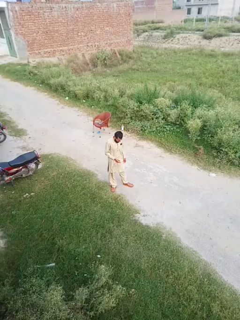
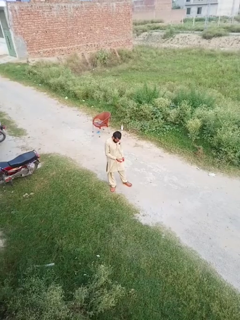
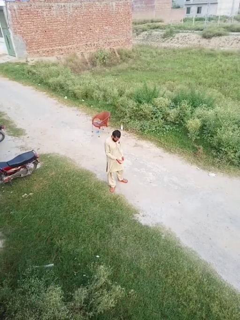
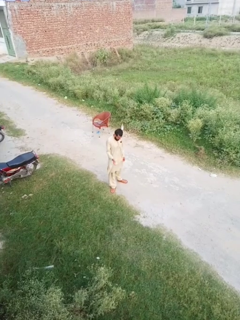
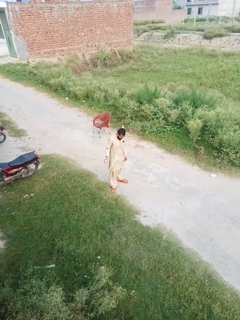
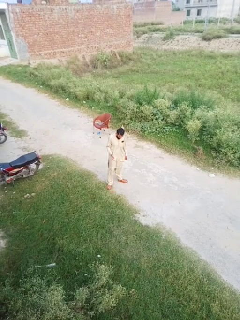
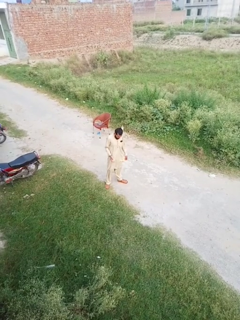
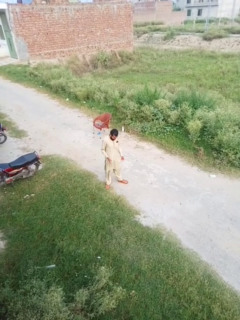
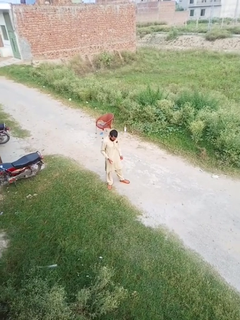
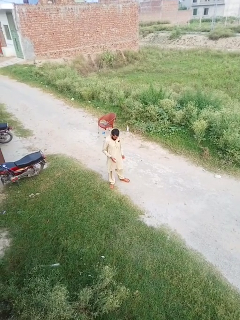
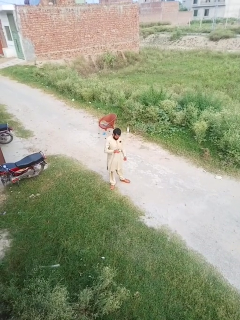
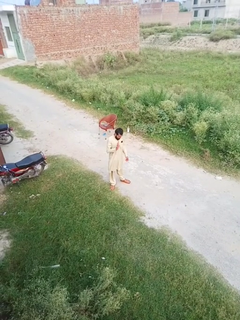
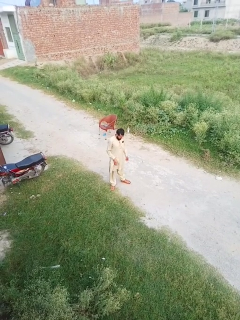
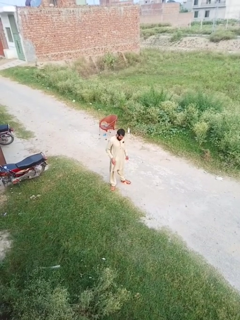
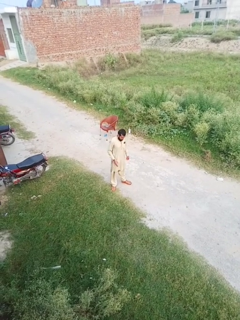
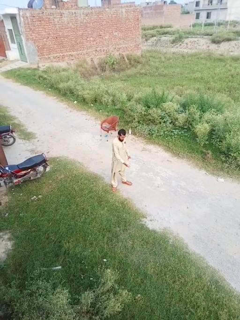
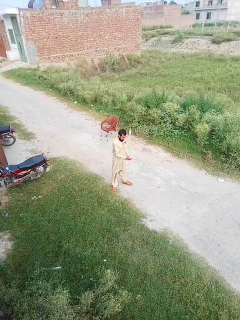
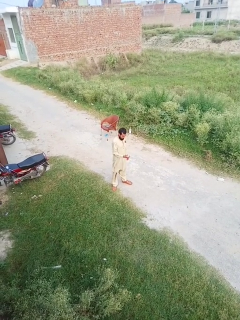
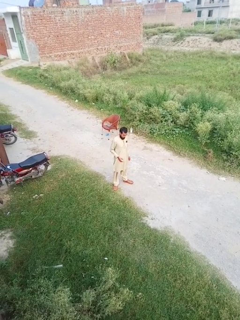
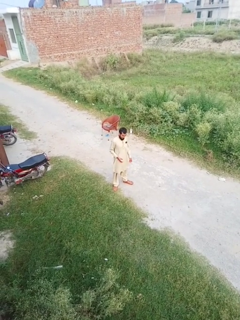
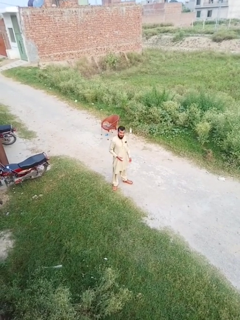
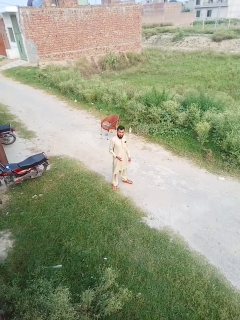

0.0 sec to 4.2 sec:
person bounces ball on floor

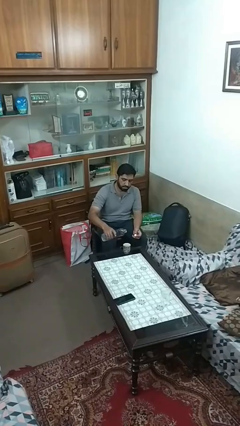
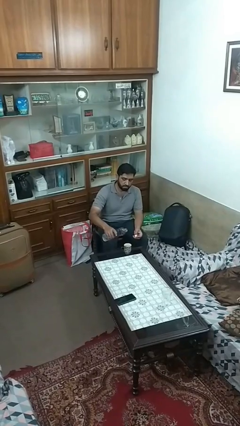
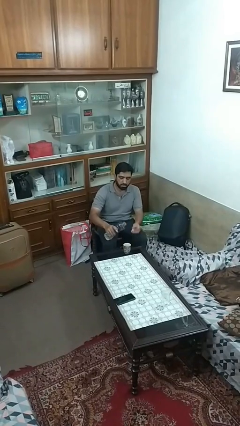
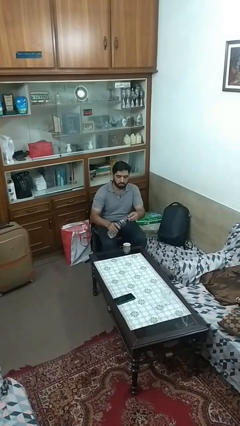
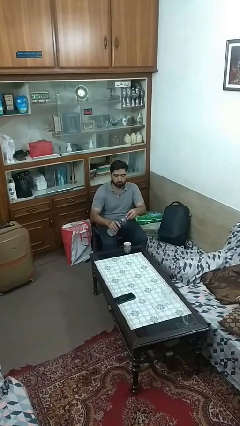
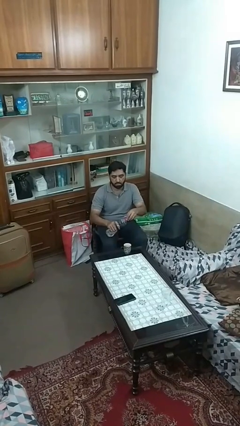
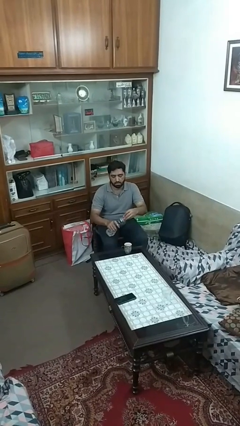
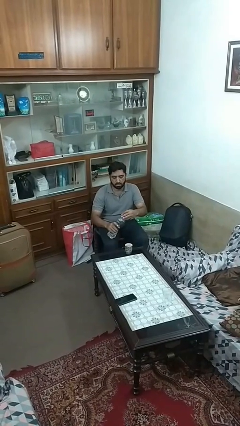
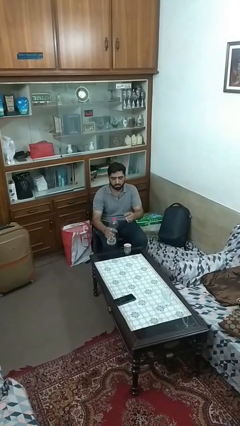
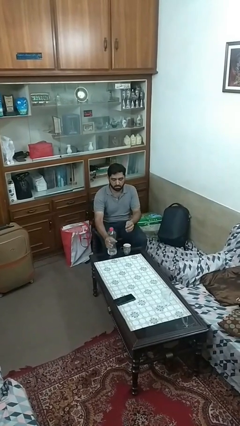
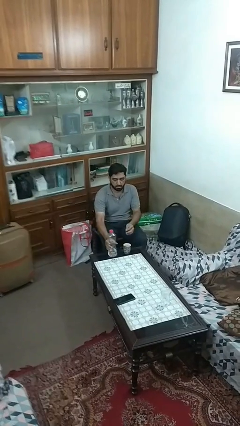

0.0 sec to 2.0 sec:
person screws lid to bottle

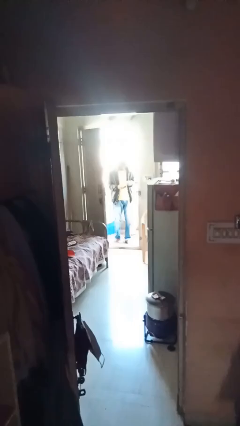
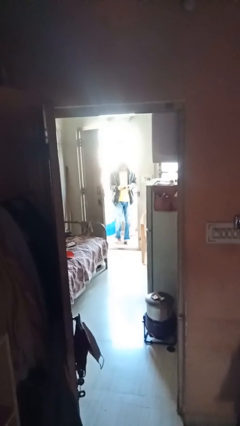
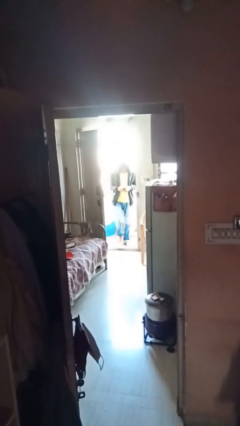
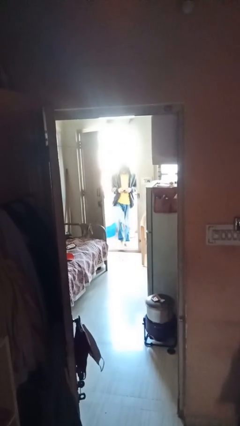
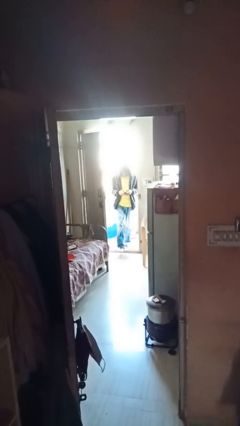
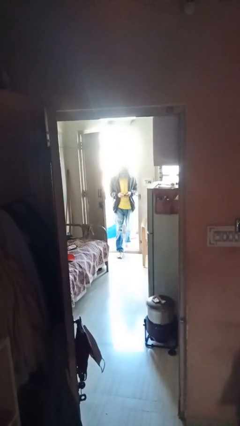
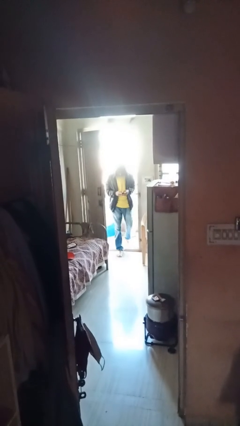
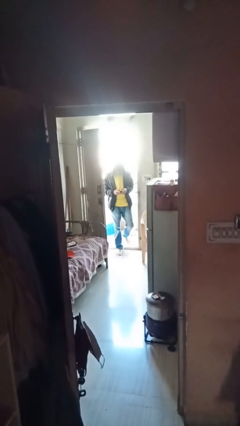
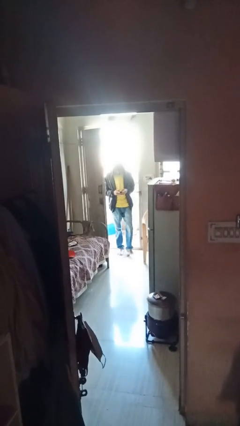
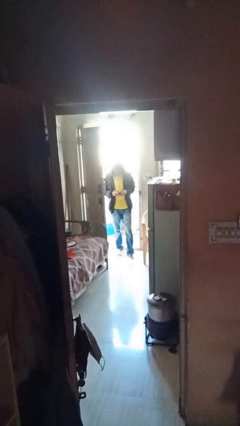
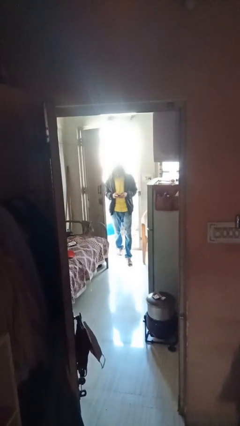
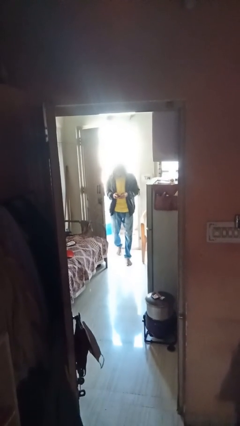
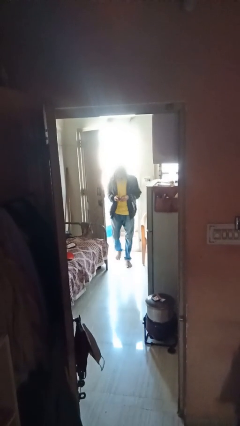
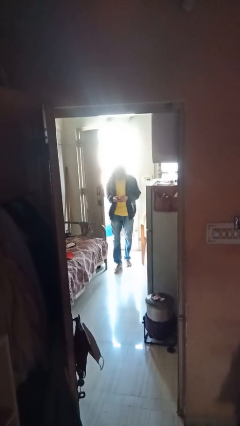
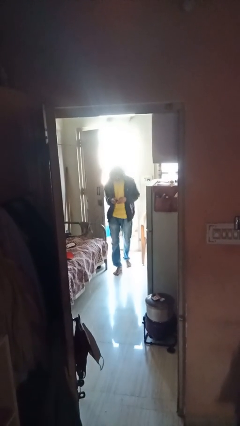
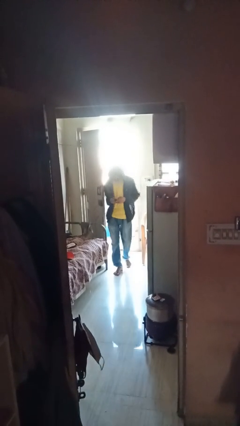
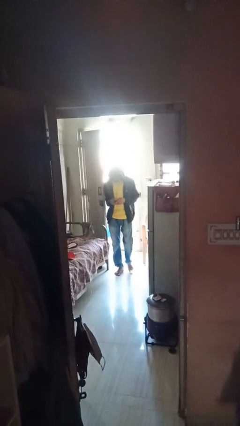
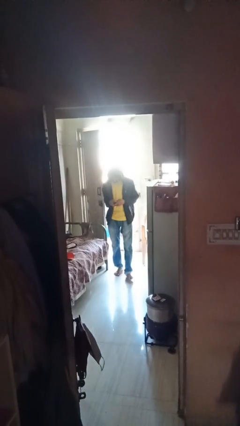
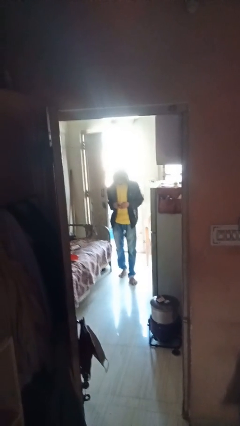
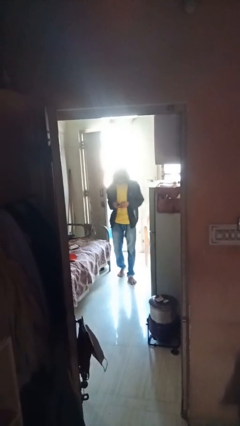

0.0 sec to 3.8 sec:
person enters scene through structure

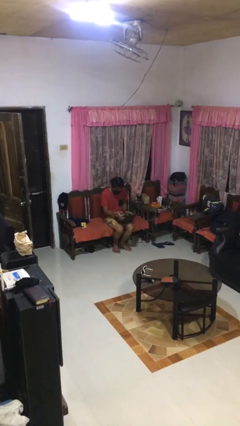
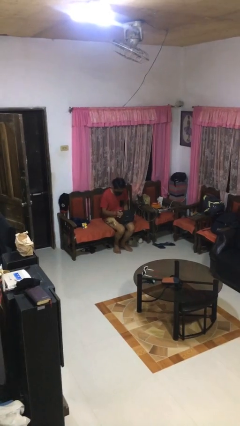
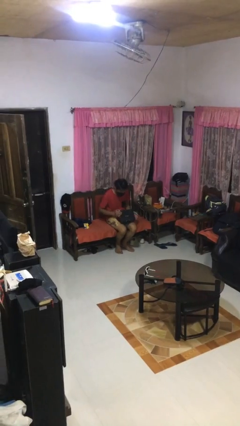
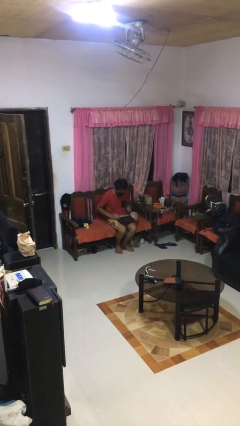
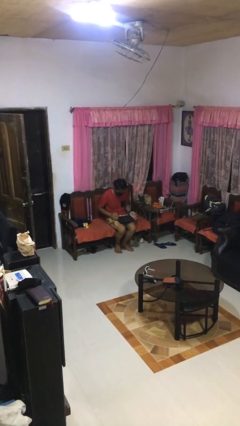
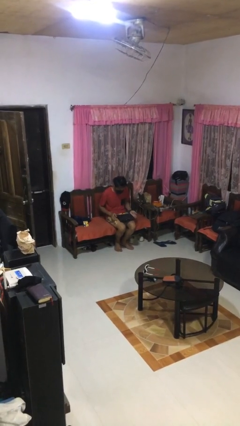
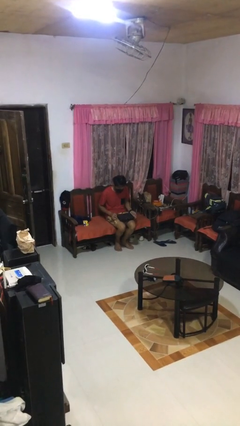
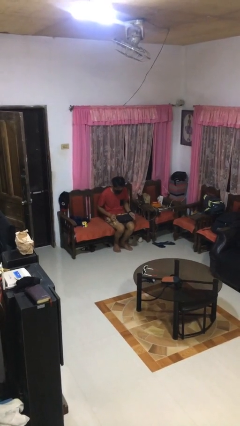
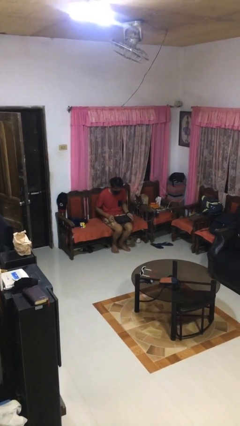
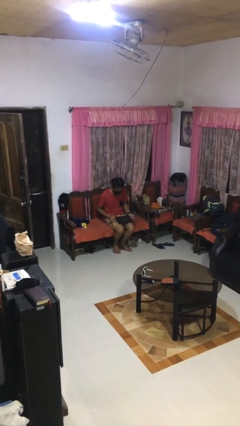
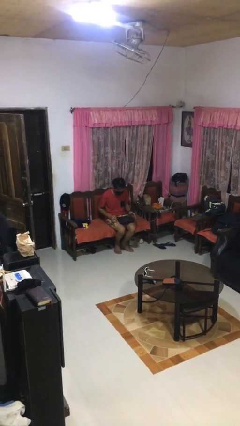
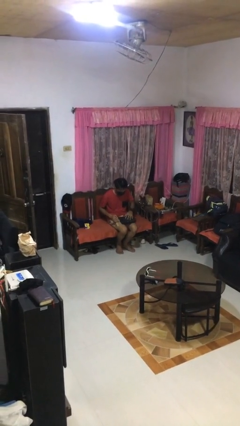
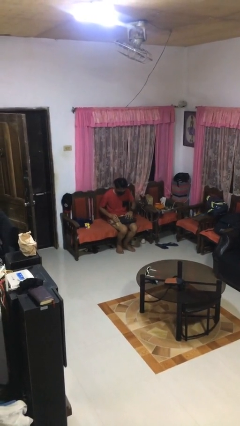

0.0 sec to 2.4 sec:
person closes laptop

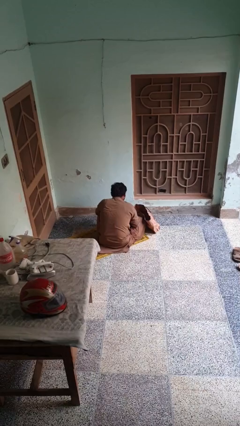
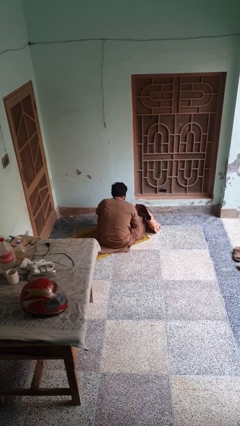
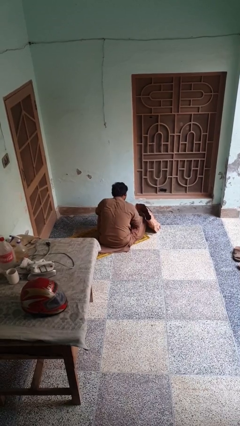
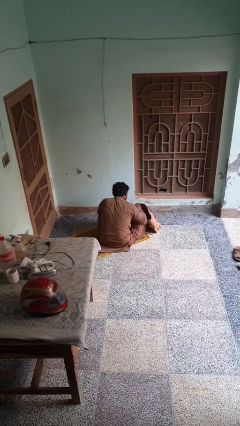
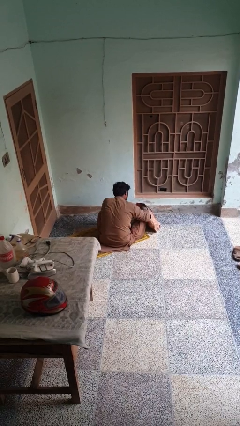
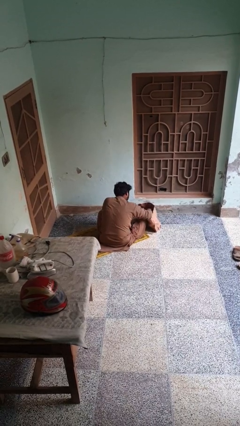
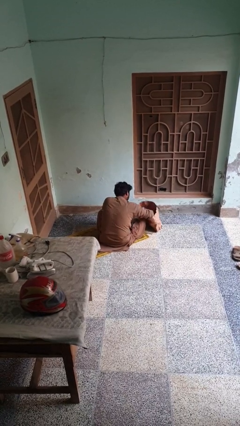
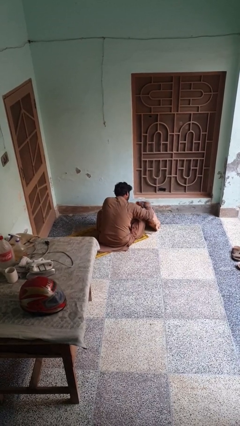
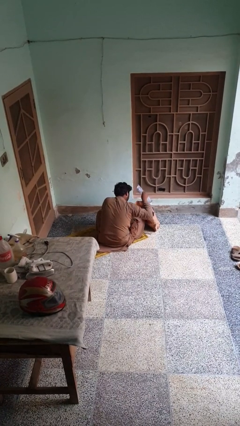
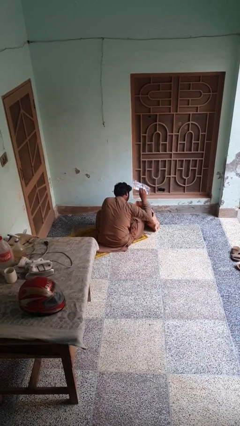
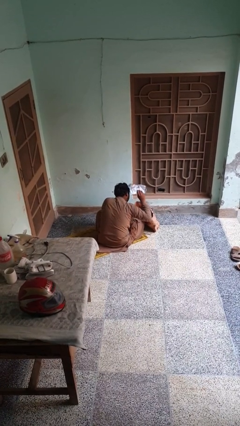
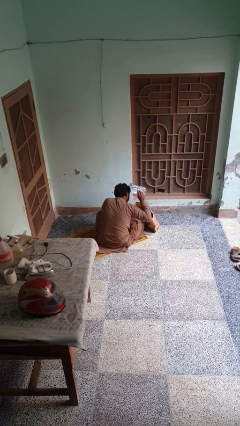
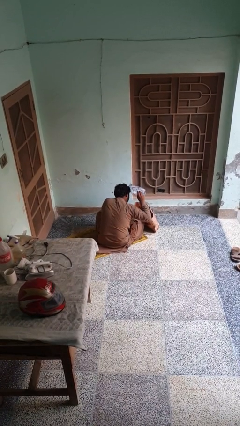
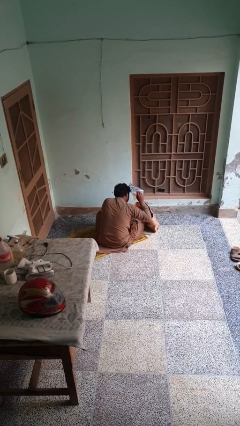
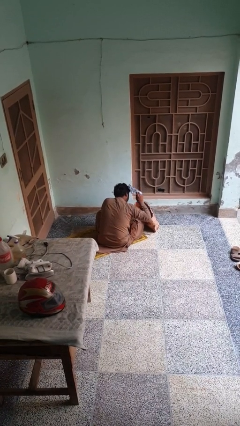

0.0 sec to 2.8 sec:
person searches in bag

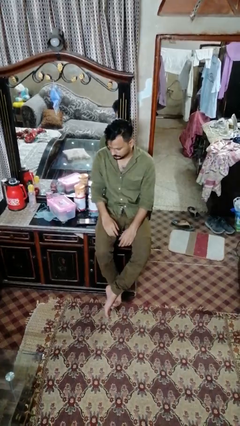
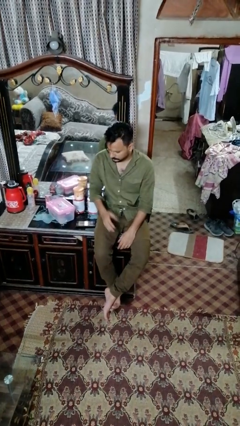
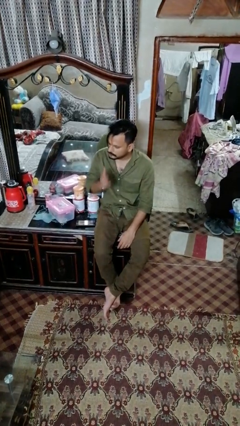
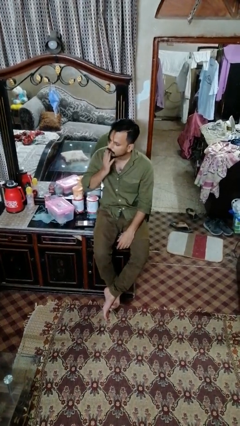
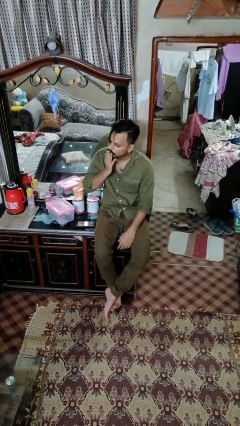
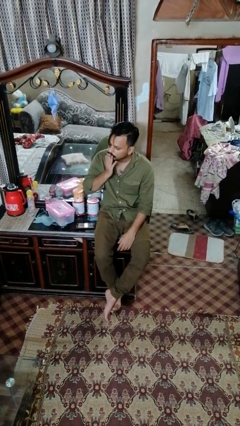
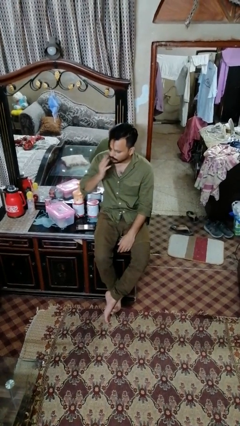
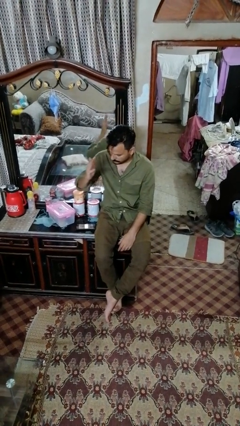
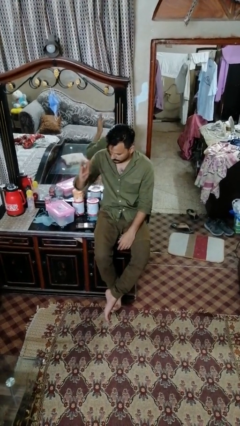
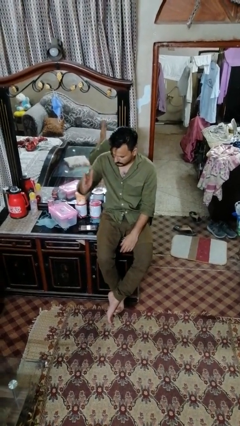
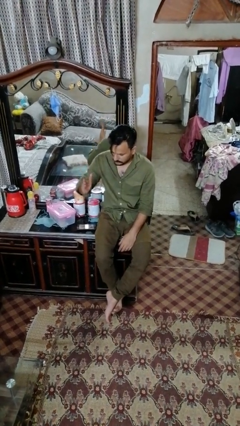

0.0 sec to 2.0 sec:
person gestures blow kiss

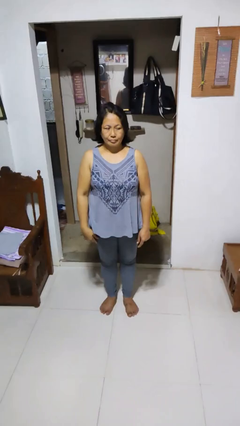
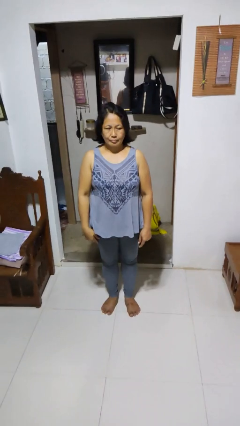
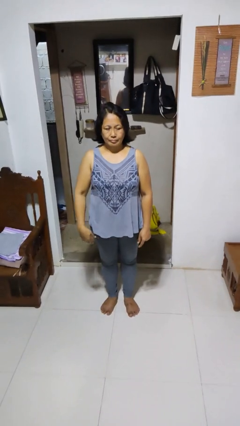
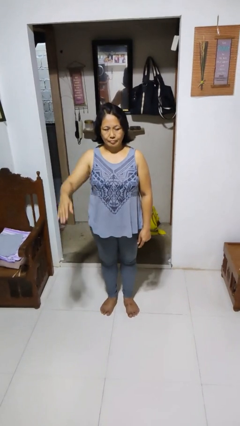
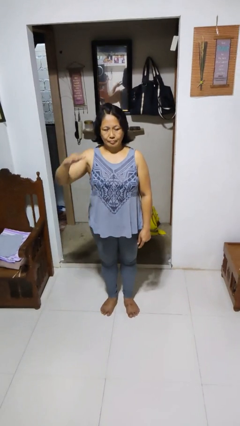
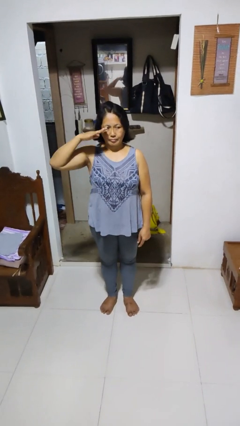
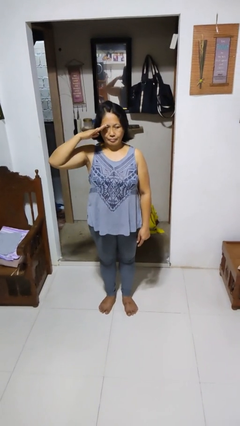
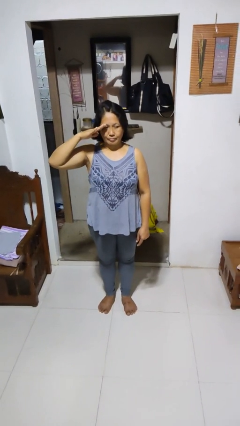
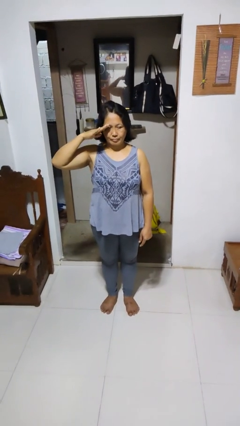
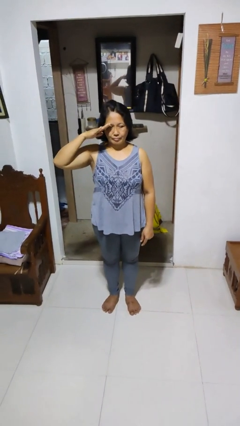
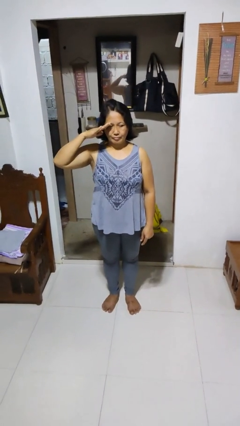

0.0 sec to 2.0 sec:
person salutes
